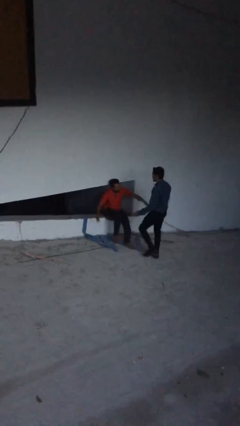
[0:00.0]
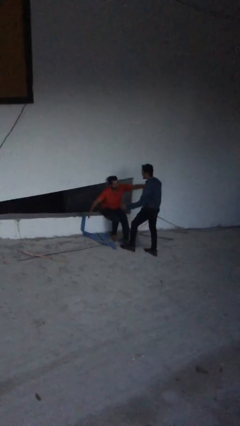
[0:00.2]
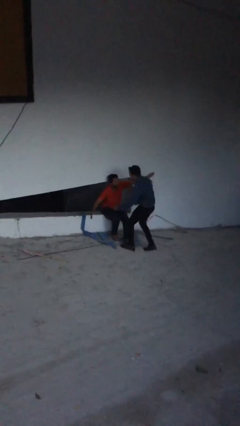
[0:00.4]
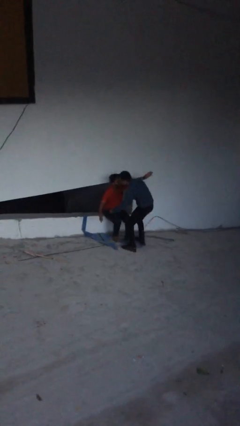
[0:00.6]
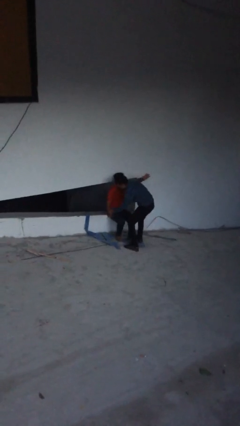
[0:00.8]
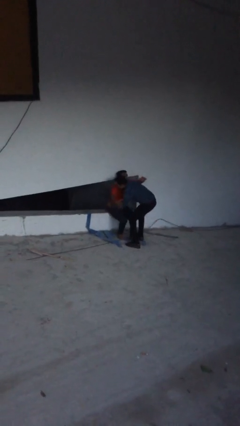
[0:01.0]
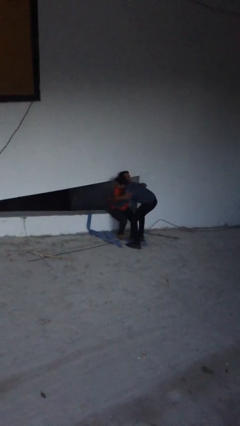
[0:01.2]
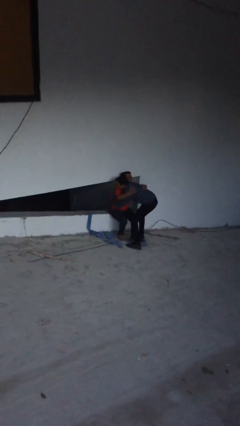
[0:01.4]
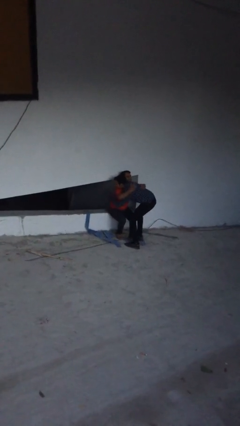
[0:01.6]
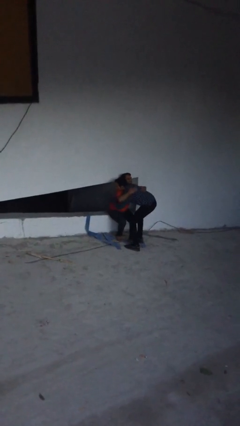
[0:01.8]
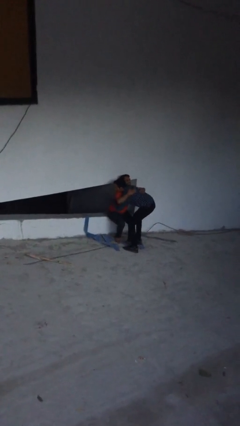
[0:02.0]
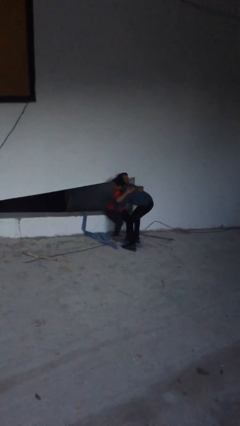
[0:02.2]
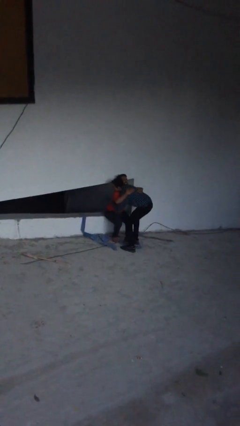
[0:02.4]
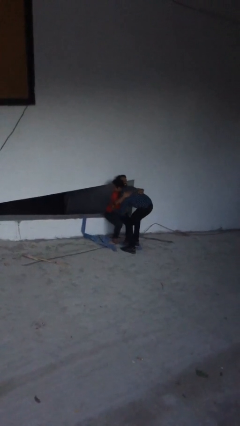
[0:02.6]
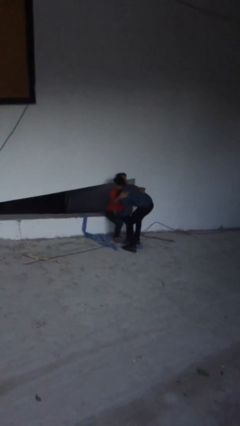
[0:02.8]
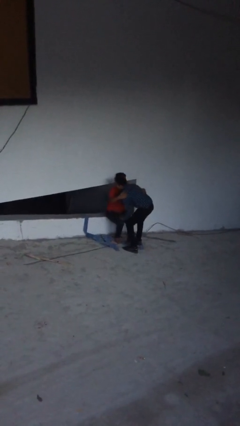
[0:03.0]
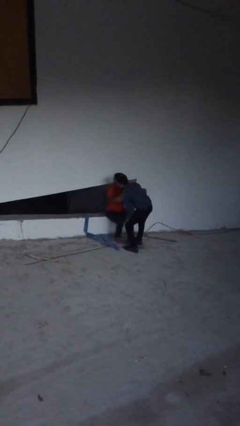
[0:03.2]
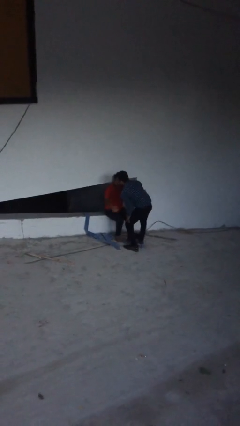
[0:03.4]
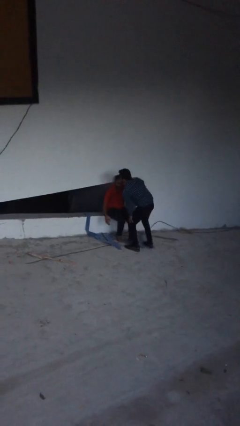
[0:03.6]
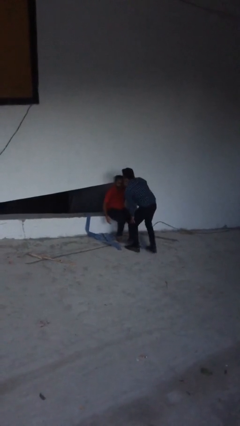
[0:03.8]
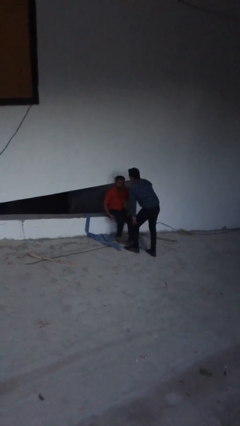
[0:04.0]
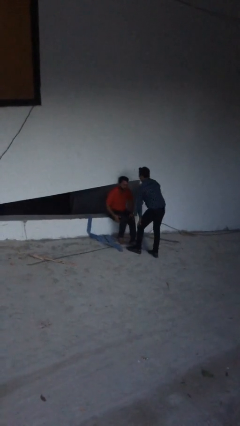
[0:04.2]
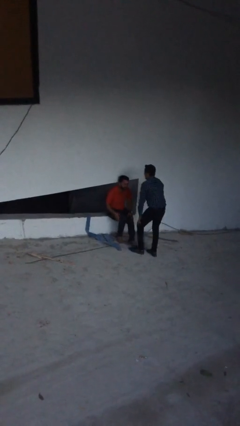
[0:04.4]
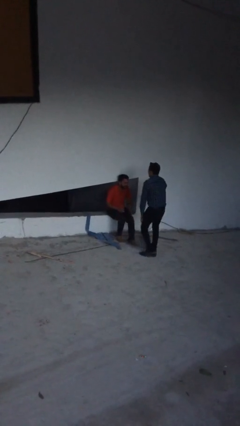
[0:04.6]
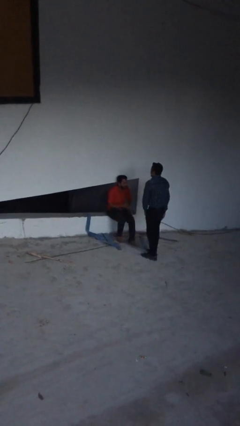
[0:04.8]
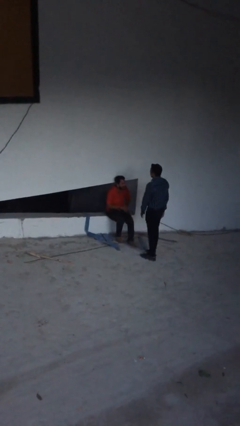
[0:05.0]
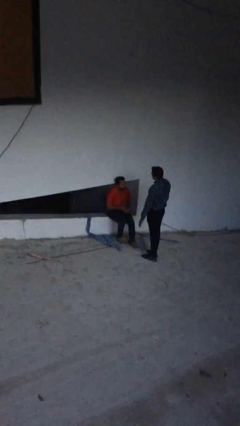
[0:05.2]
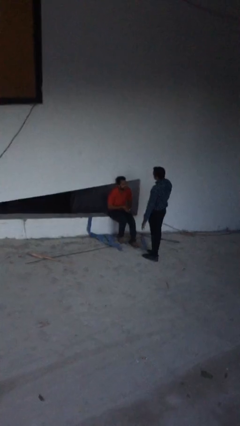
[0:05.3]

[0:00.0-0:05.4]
person embraces person

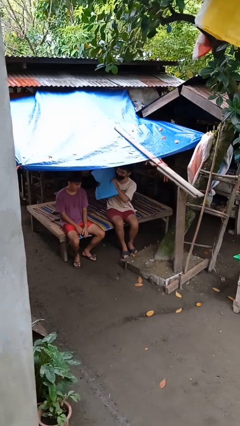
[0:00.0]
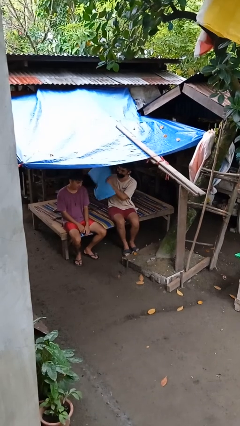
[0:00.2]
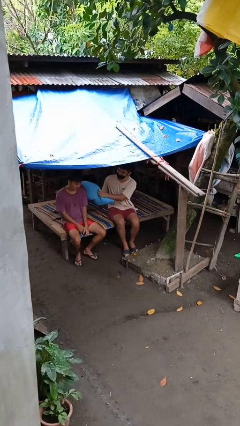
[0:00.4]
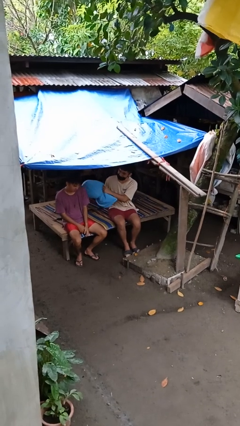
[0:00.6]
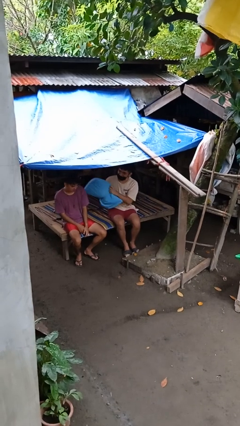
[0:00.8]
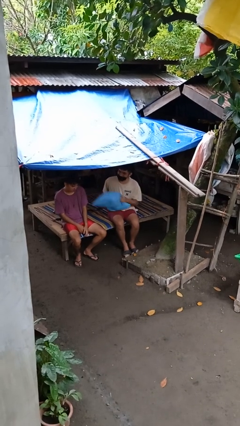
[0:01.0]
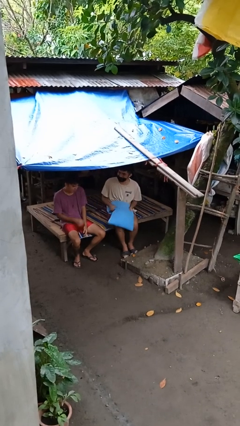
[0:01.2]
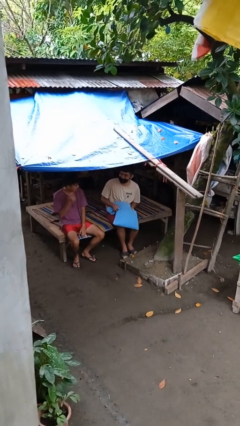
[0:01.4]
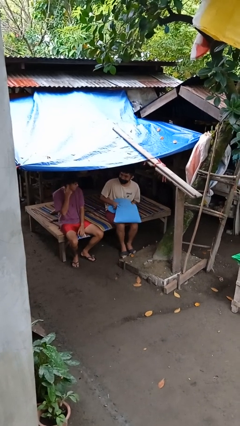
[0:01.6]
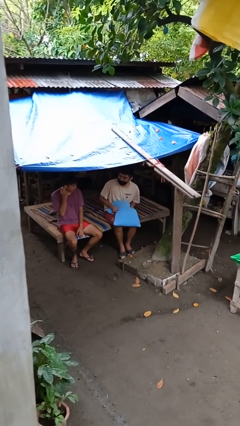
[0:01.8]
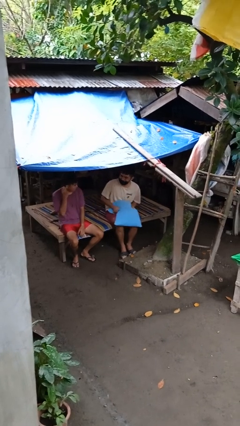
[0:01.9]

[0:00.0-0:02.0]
person hits person with pillow

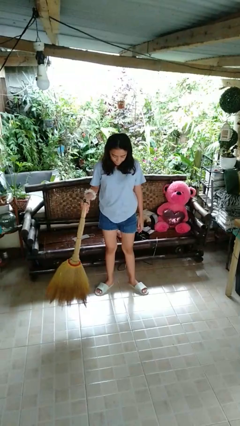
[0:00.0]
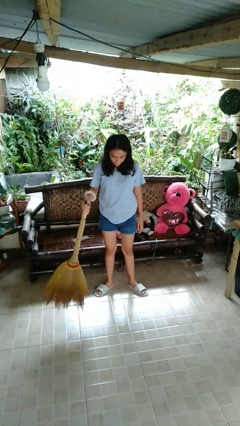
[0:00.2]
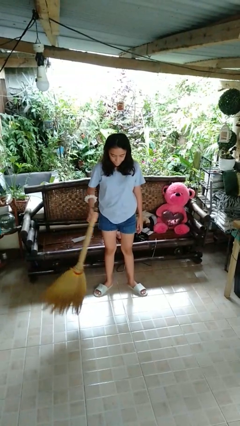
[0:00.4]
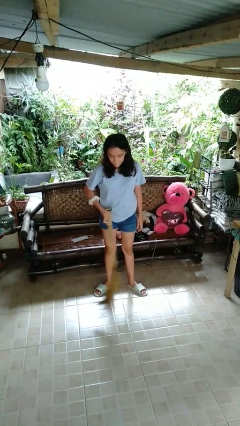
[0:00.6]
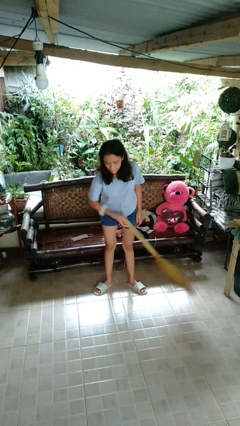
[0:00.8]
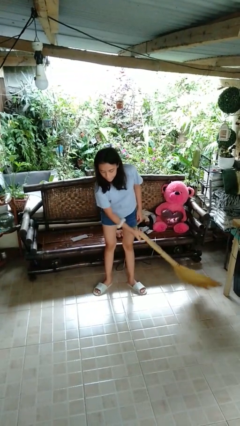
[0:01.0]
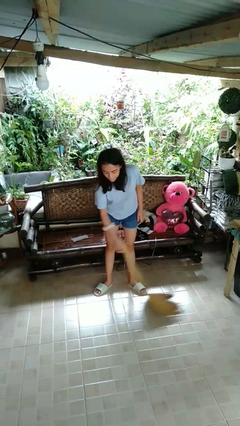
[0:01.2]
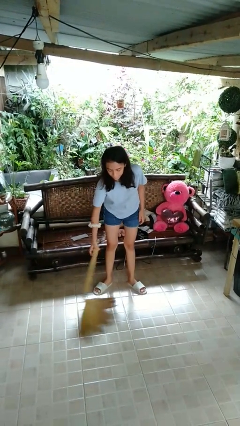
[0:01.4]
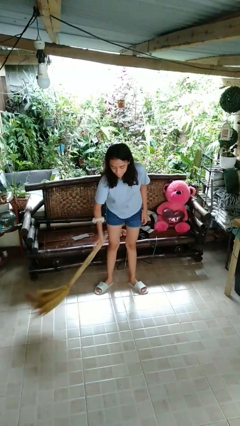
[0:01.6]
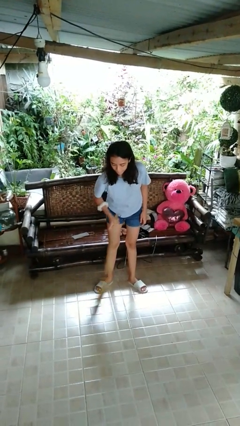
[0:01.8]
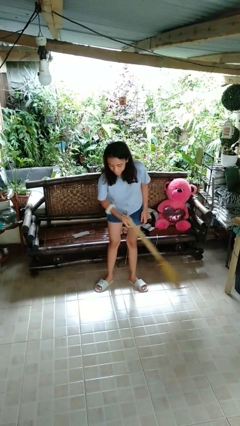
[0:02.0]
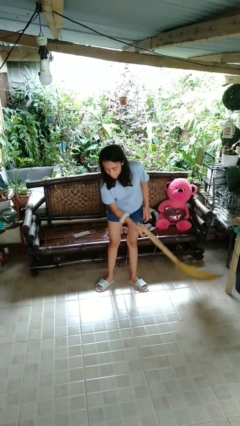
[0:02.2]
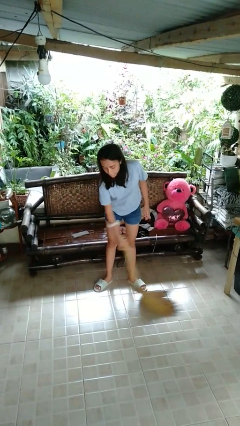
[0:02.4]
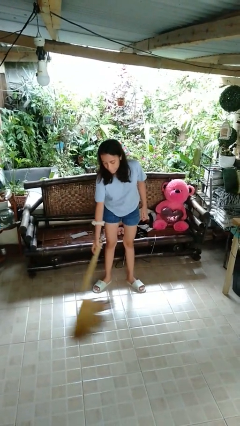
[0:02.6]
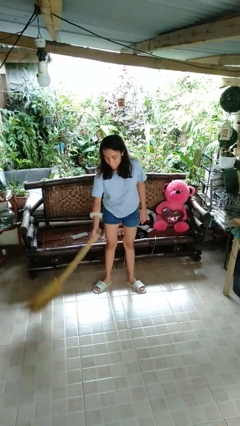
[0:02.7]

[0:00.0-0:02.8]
person sweeps floor

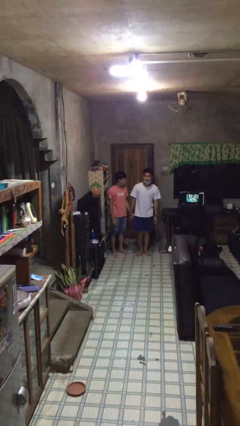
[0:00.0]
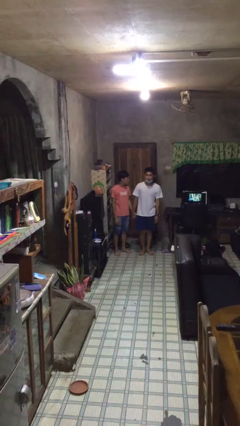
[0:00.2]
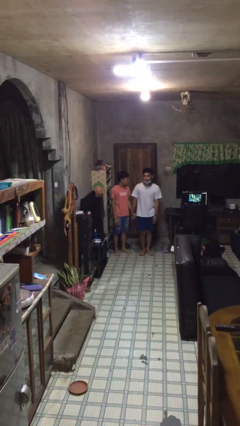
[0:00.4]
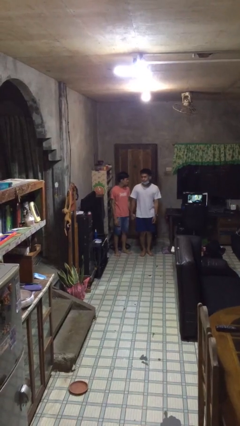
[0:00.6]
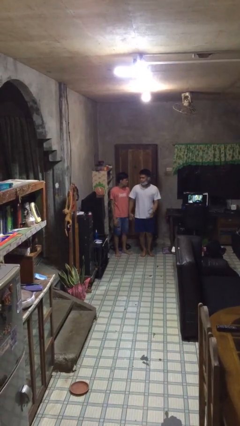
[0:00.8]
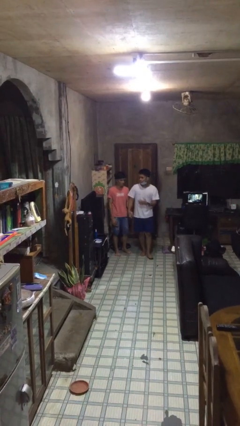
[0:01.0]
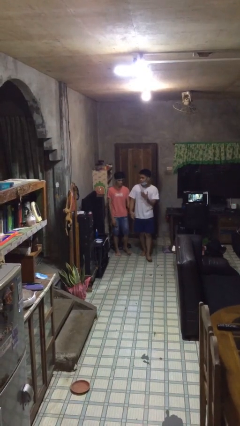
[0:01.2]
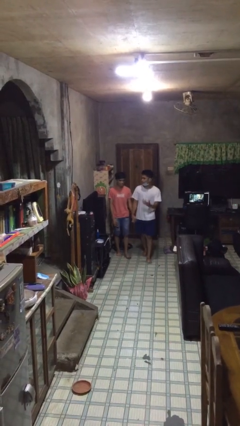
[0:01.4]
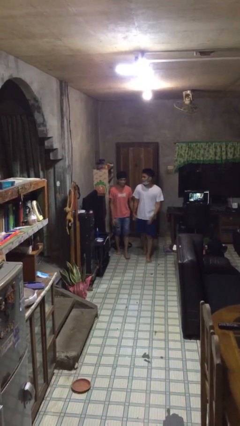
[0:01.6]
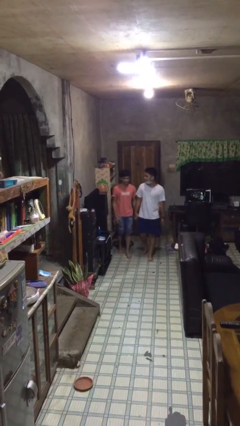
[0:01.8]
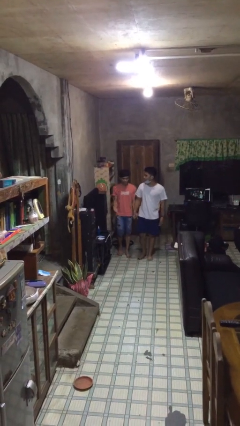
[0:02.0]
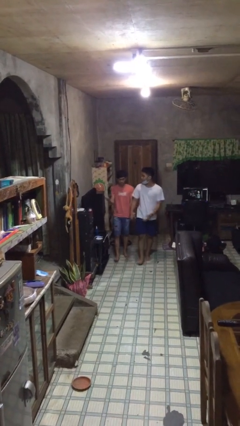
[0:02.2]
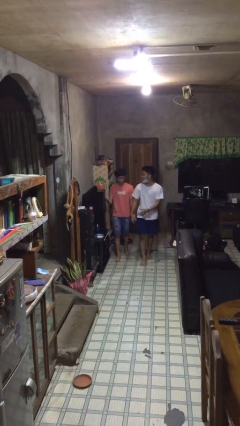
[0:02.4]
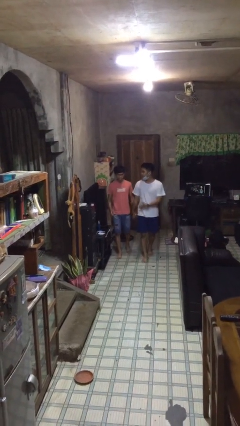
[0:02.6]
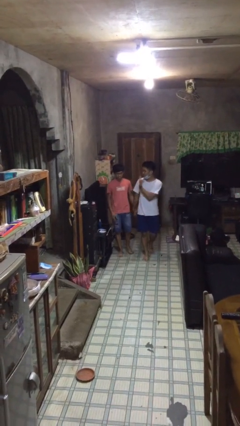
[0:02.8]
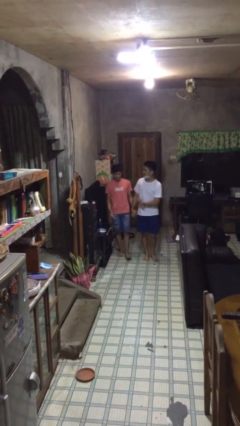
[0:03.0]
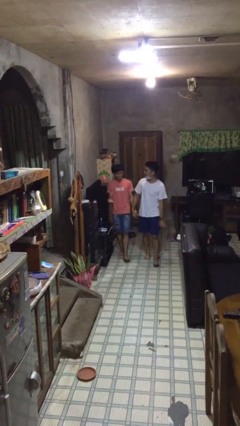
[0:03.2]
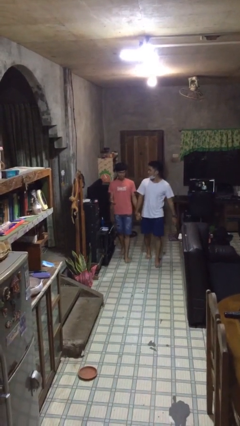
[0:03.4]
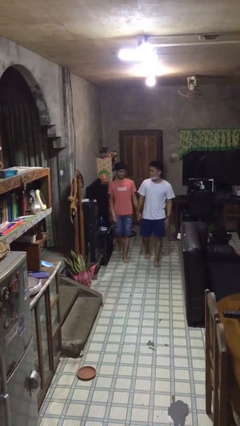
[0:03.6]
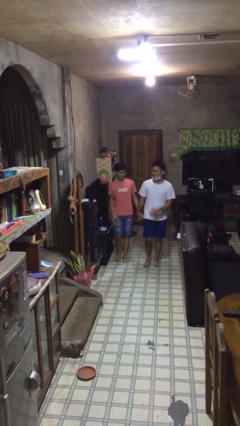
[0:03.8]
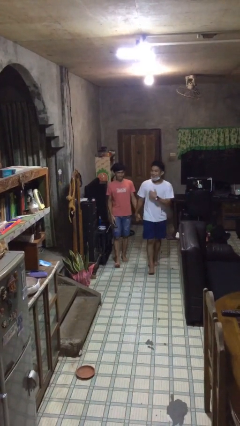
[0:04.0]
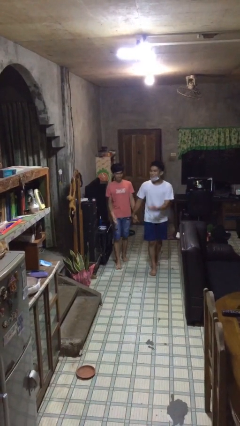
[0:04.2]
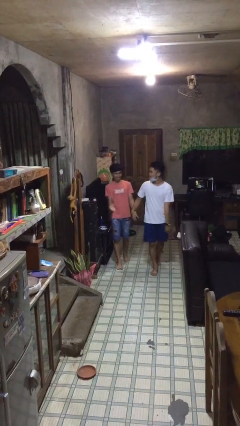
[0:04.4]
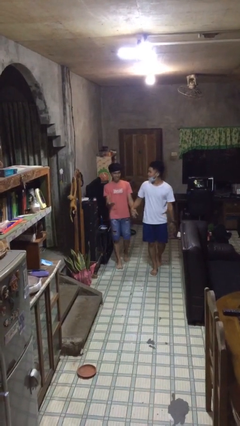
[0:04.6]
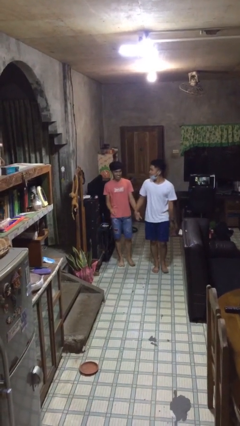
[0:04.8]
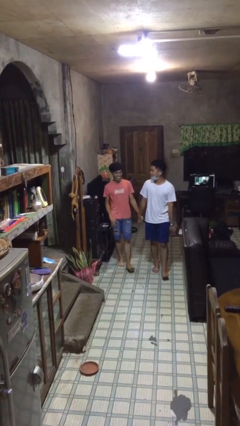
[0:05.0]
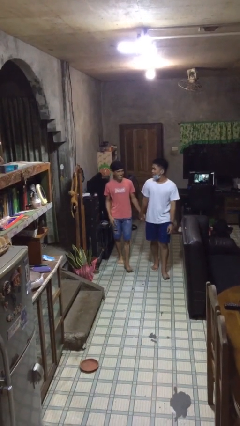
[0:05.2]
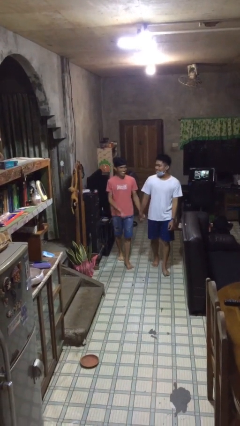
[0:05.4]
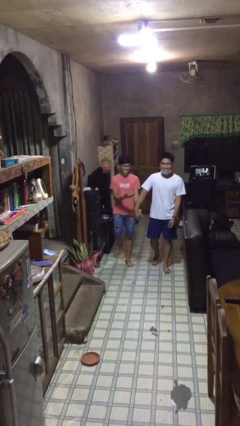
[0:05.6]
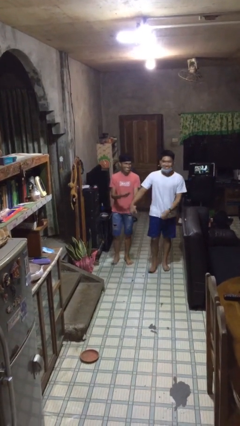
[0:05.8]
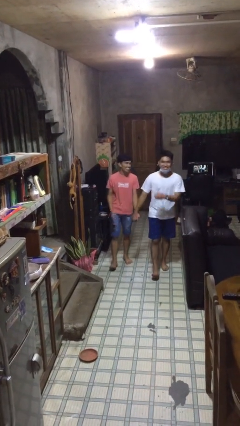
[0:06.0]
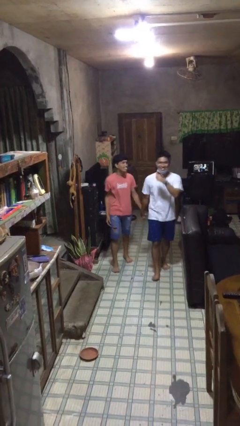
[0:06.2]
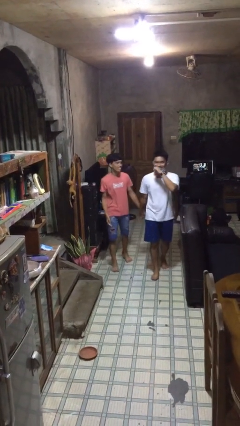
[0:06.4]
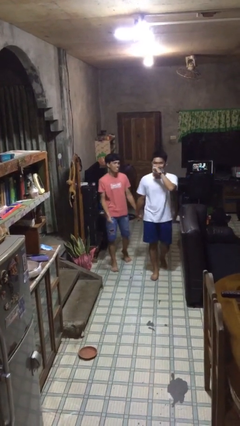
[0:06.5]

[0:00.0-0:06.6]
person holds hand

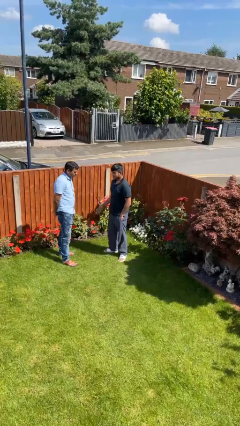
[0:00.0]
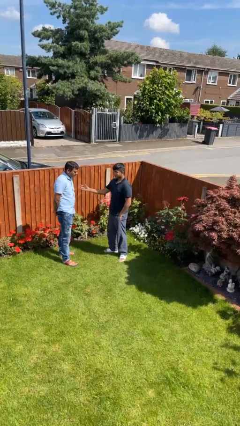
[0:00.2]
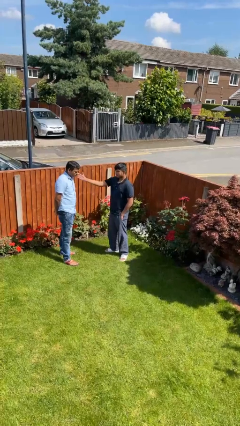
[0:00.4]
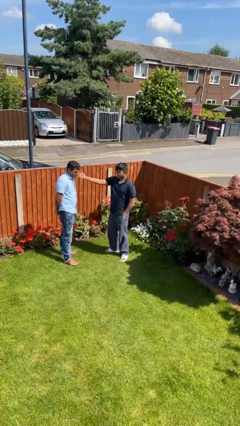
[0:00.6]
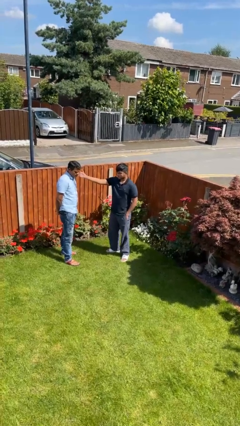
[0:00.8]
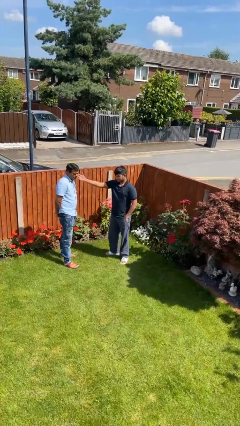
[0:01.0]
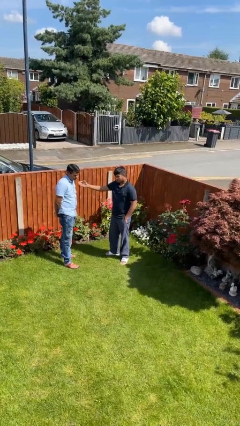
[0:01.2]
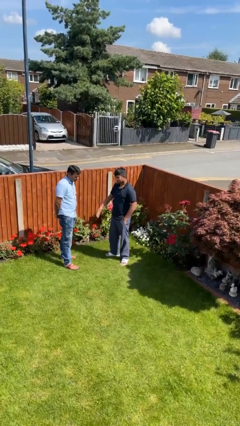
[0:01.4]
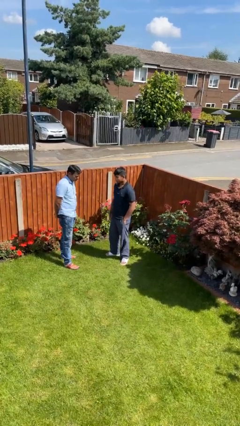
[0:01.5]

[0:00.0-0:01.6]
person touches face of person
